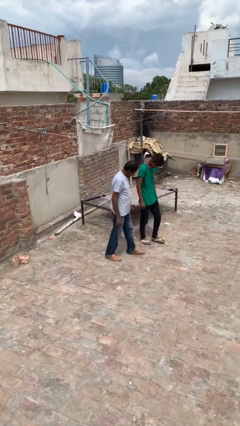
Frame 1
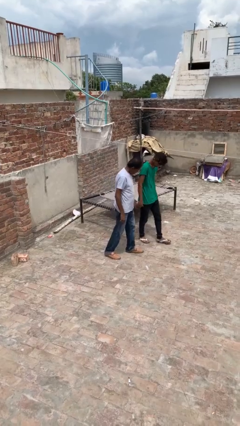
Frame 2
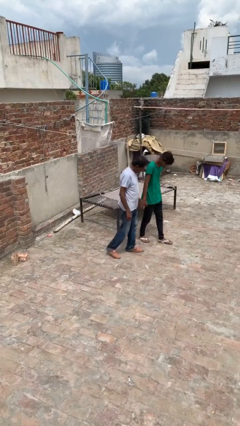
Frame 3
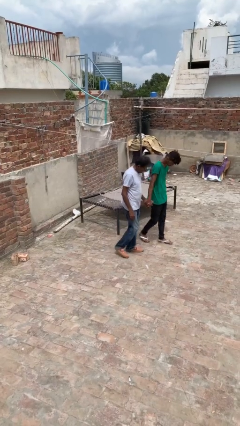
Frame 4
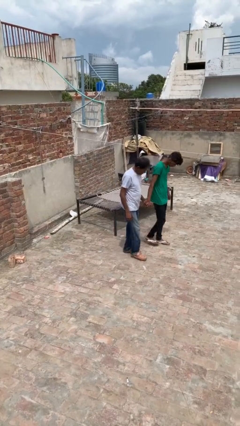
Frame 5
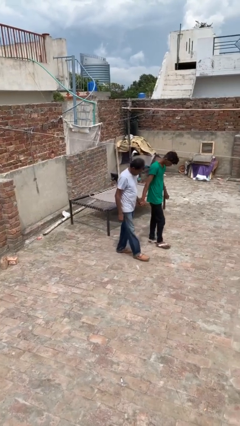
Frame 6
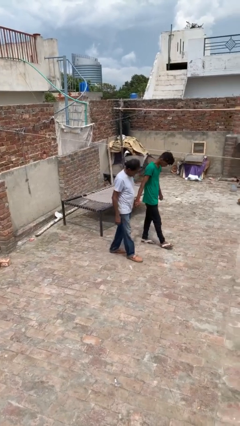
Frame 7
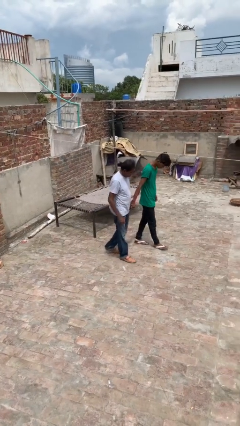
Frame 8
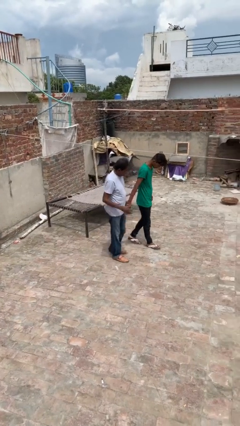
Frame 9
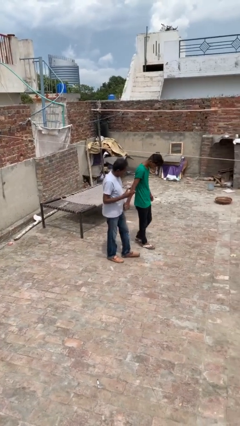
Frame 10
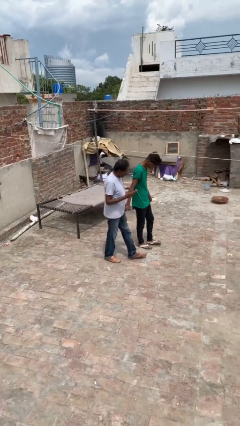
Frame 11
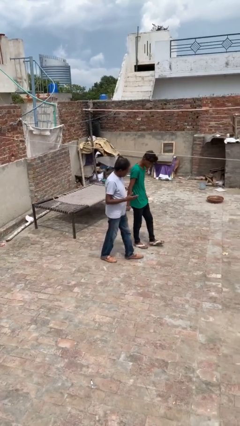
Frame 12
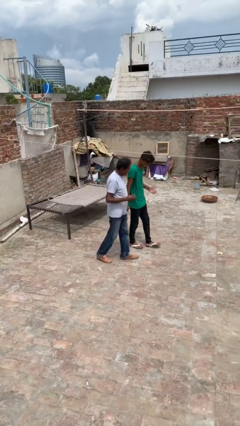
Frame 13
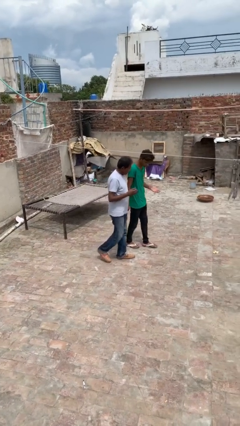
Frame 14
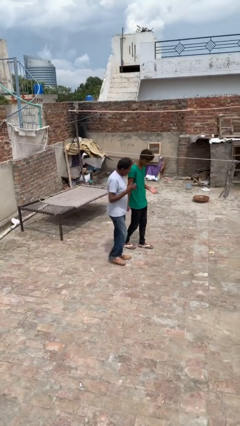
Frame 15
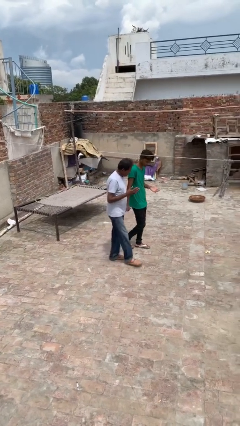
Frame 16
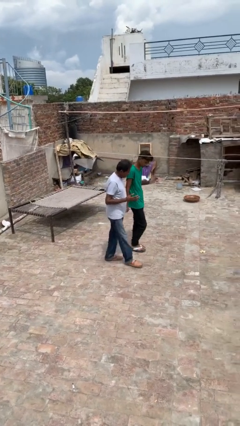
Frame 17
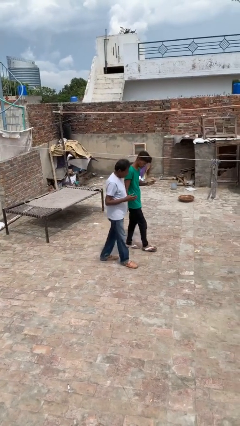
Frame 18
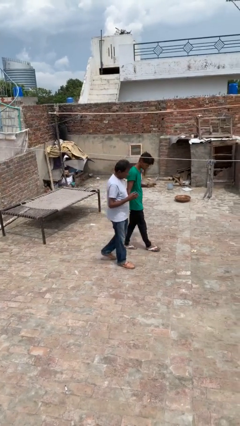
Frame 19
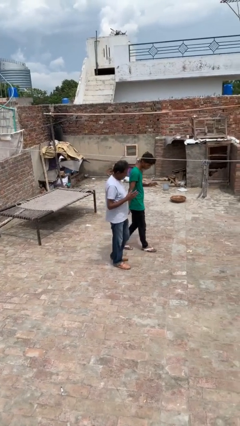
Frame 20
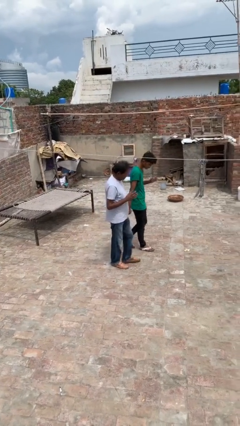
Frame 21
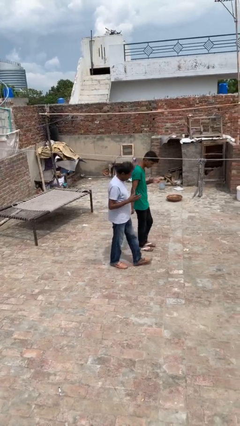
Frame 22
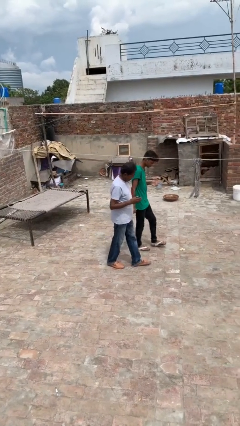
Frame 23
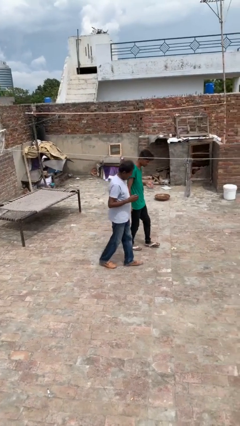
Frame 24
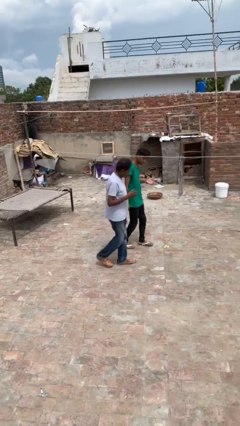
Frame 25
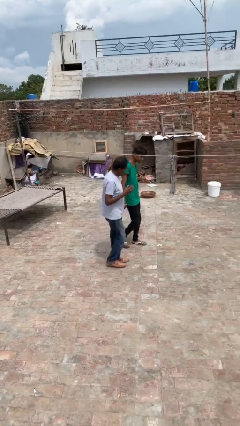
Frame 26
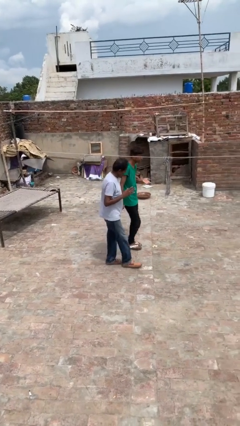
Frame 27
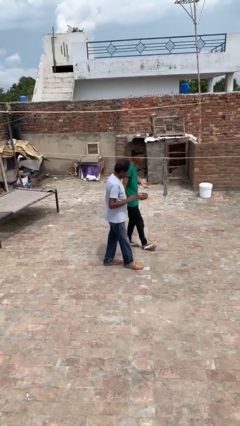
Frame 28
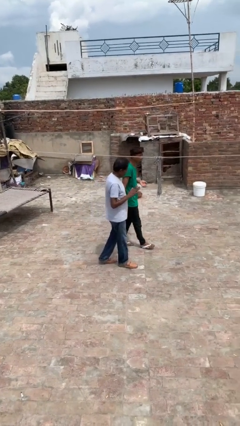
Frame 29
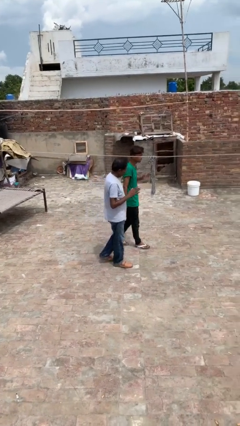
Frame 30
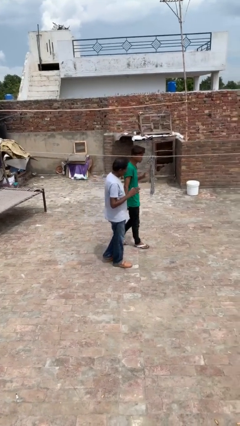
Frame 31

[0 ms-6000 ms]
person holds hand

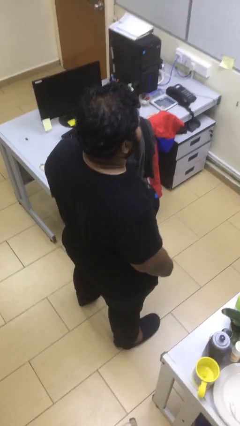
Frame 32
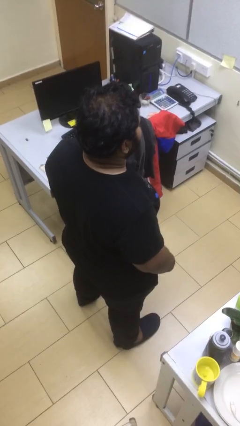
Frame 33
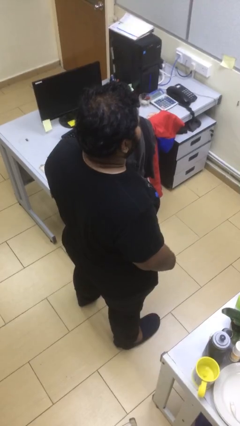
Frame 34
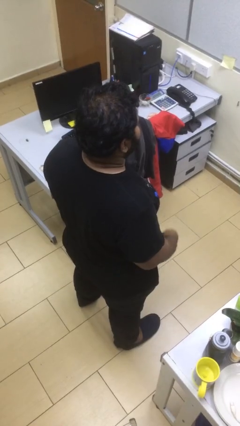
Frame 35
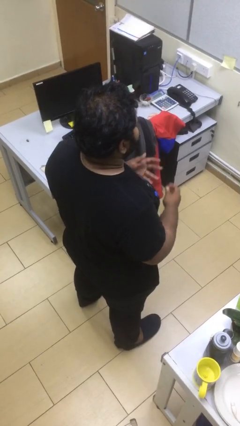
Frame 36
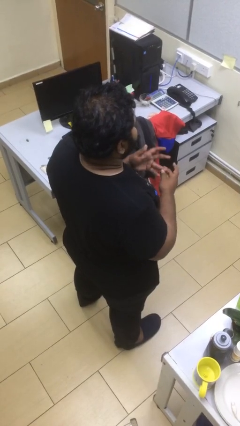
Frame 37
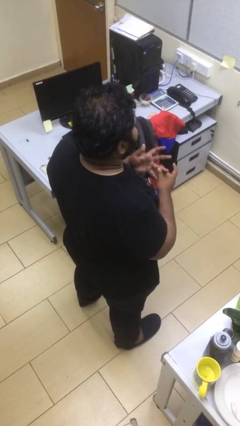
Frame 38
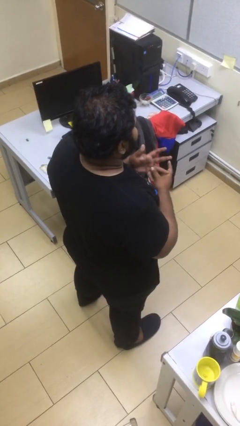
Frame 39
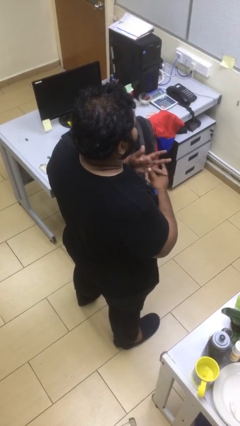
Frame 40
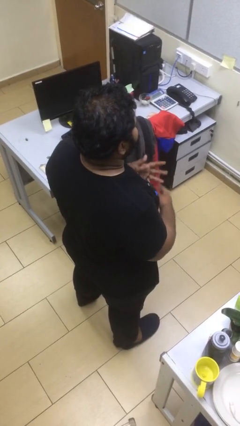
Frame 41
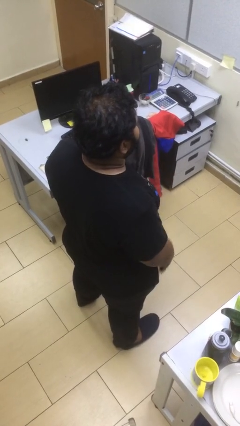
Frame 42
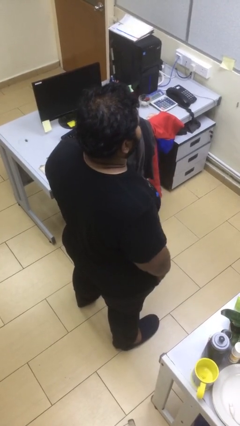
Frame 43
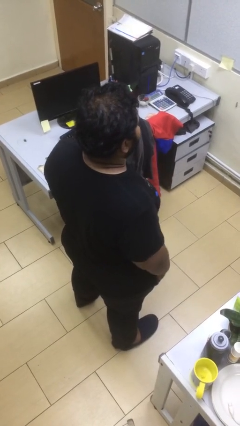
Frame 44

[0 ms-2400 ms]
person puts on ring

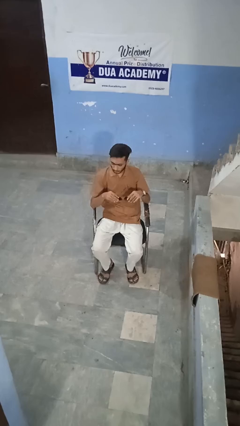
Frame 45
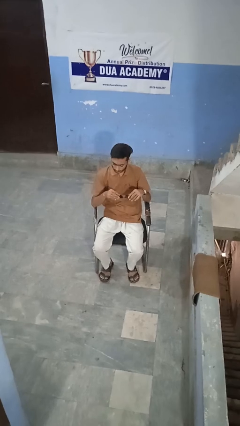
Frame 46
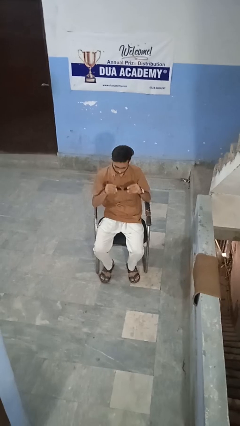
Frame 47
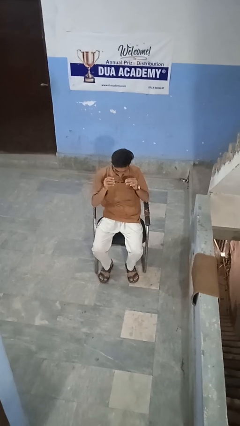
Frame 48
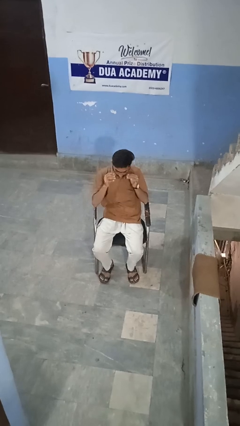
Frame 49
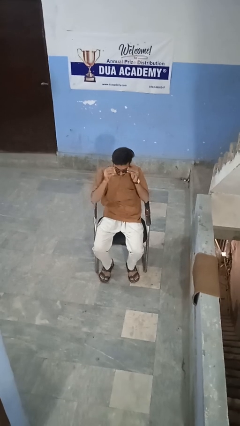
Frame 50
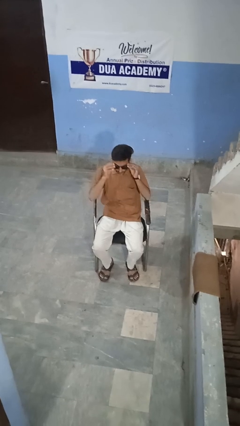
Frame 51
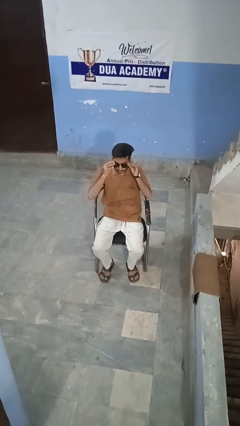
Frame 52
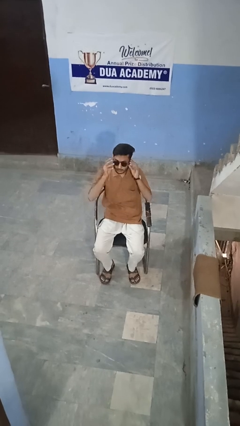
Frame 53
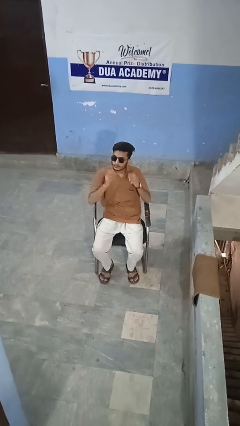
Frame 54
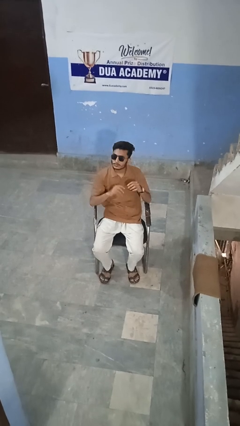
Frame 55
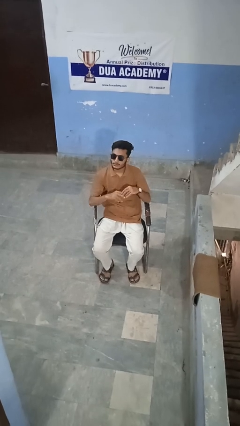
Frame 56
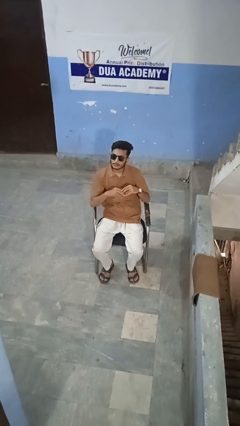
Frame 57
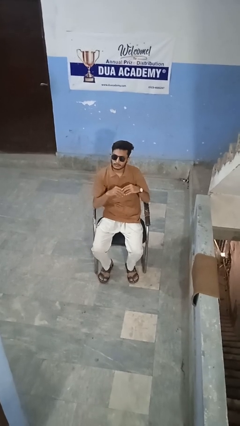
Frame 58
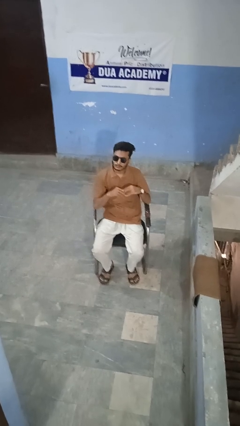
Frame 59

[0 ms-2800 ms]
person puts on sunglasses

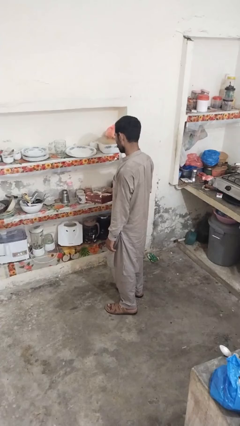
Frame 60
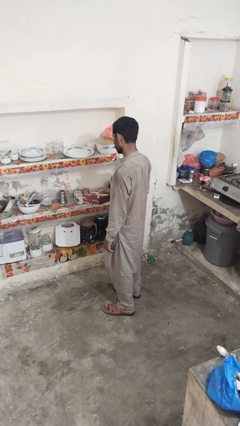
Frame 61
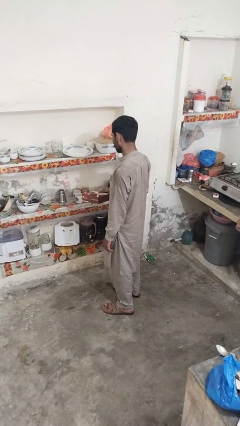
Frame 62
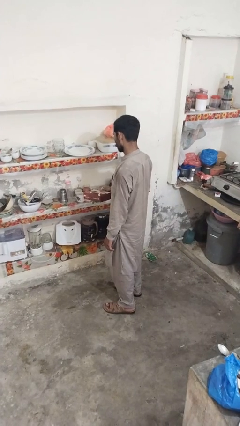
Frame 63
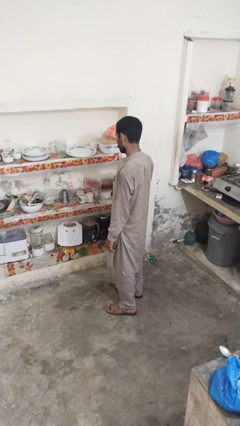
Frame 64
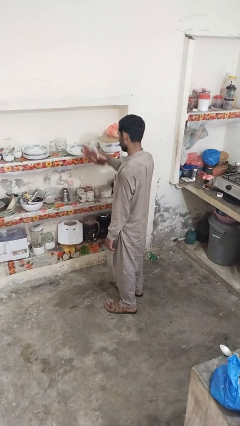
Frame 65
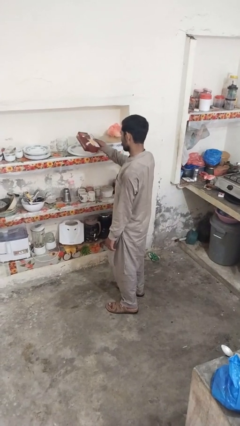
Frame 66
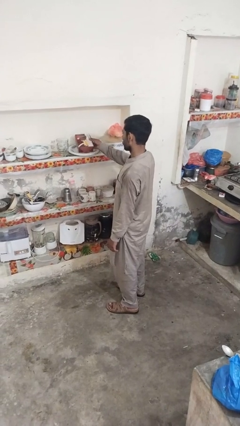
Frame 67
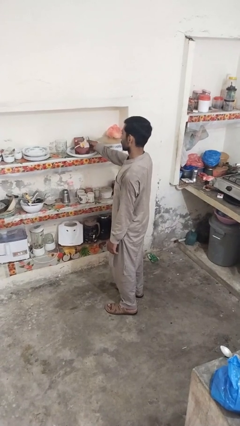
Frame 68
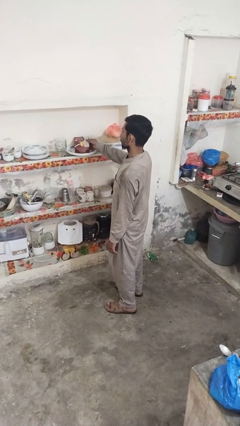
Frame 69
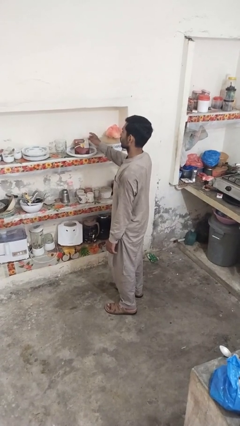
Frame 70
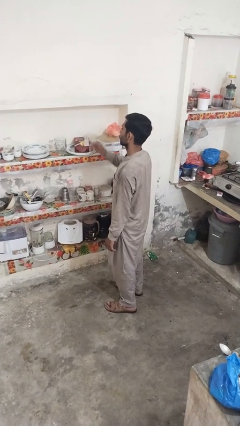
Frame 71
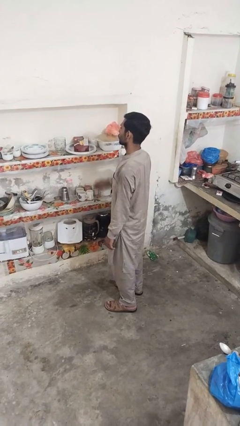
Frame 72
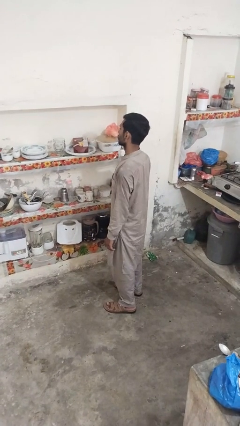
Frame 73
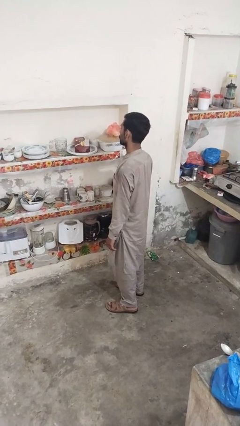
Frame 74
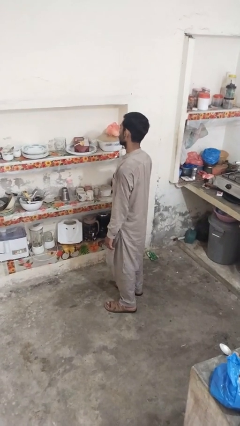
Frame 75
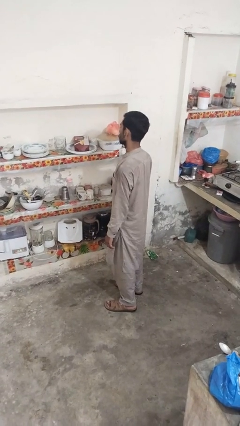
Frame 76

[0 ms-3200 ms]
person puts down object into cabinet

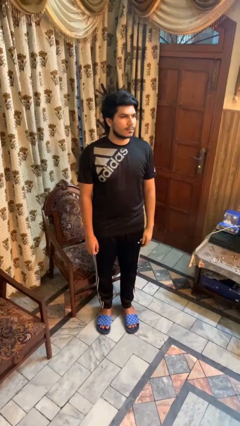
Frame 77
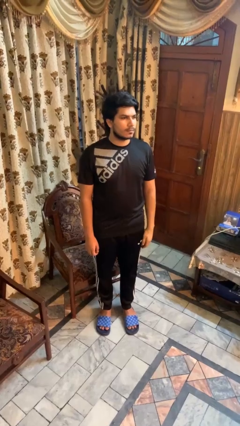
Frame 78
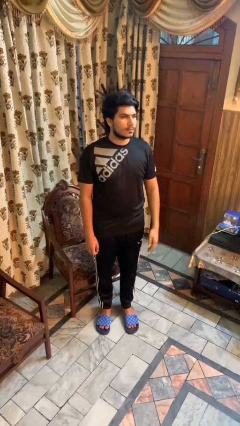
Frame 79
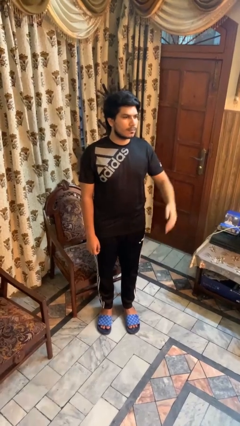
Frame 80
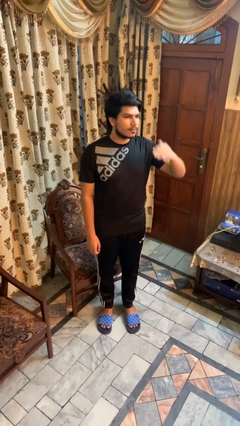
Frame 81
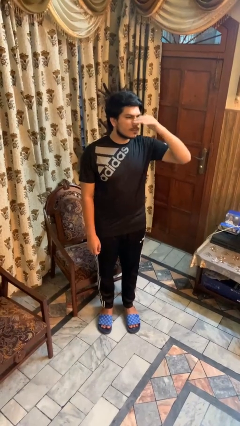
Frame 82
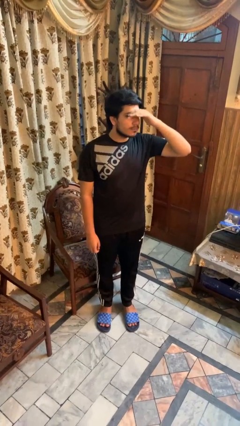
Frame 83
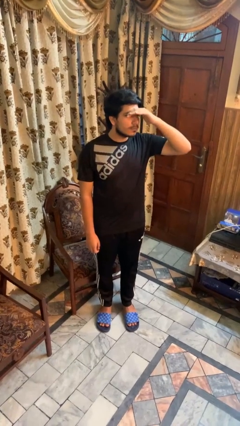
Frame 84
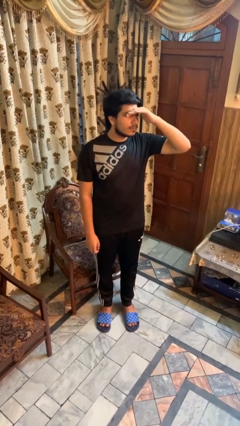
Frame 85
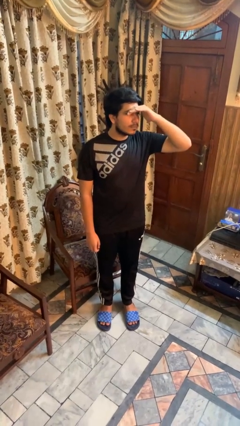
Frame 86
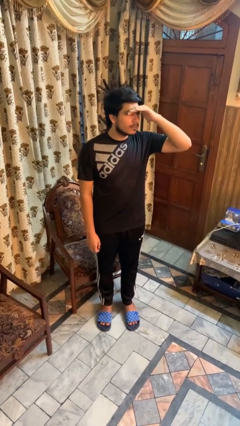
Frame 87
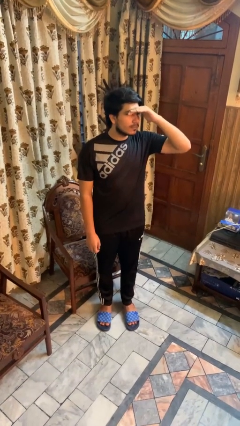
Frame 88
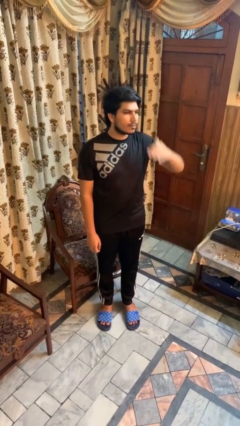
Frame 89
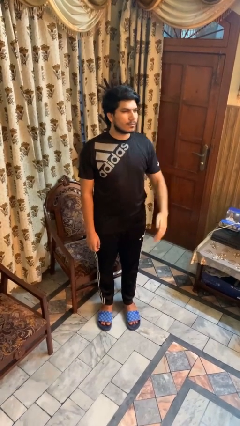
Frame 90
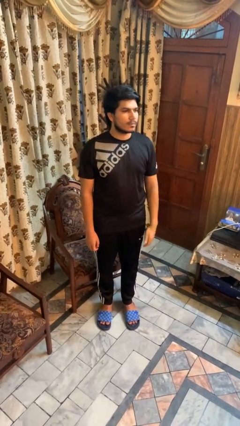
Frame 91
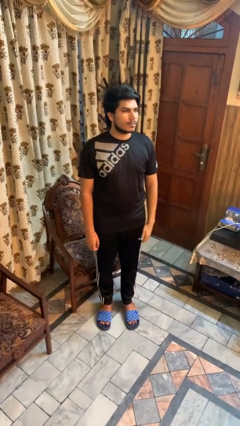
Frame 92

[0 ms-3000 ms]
person shades eyes
